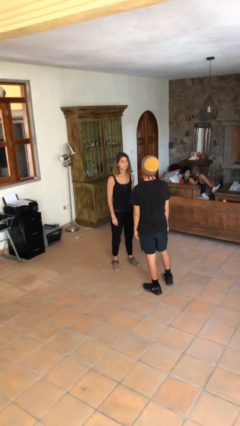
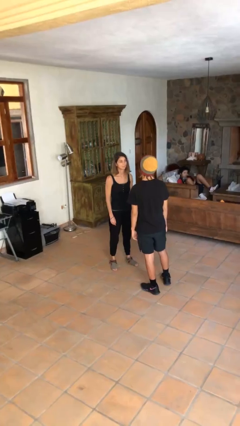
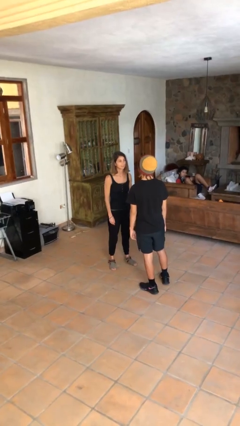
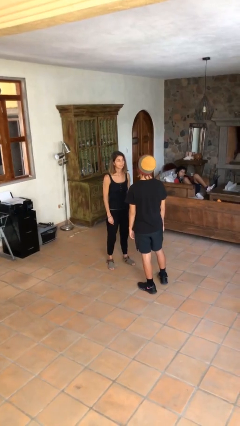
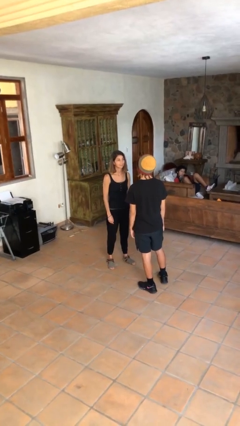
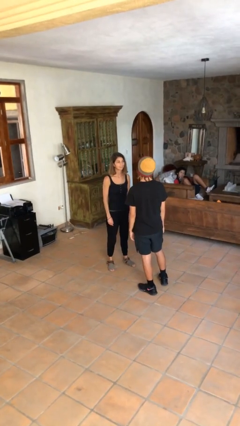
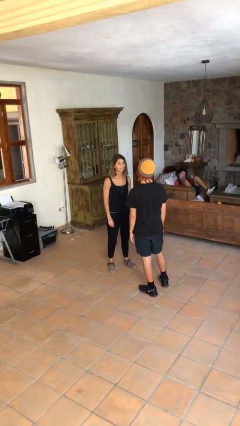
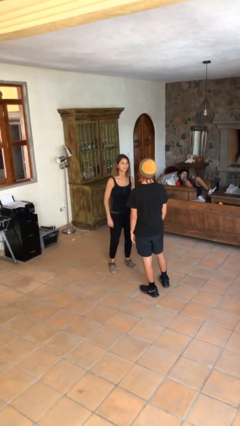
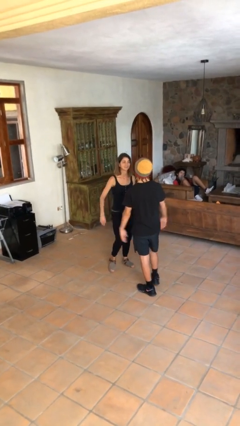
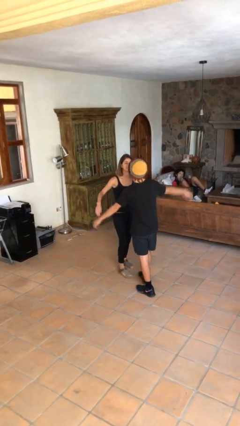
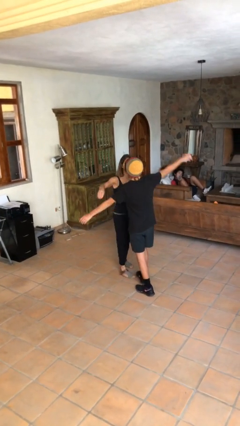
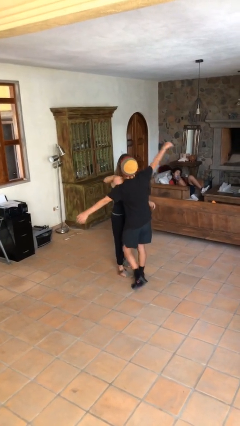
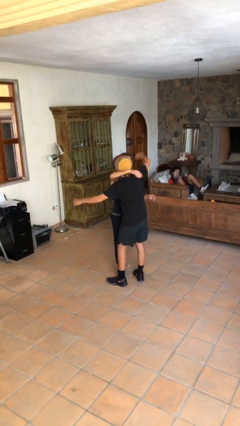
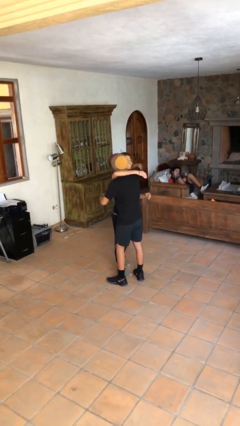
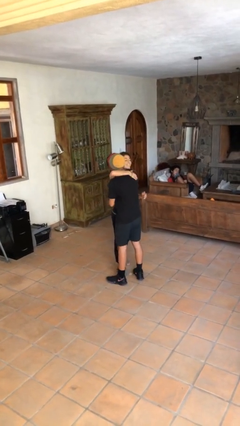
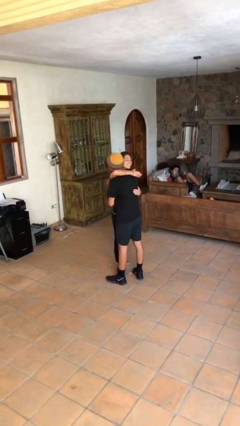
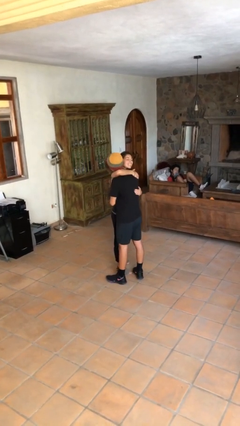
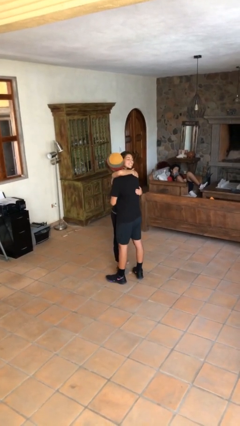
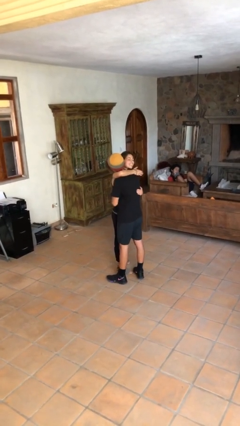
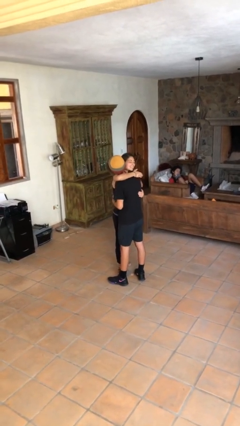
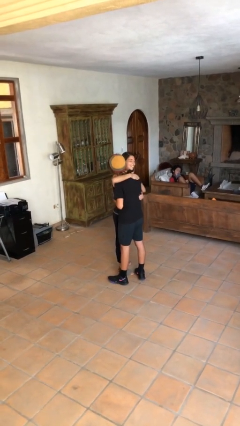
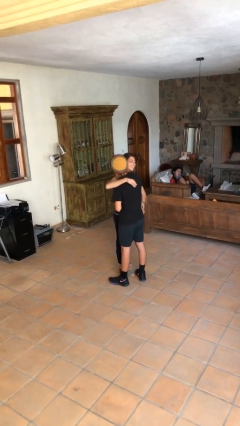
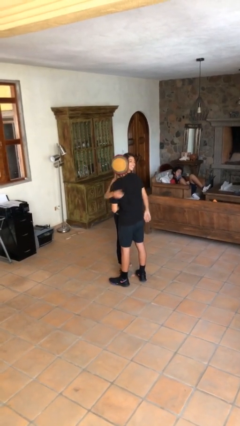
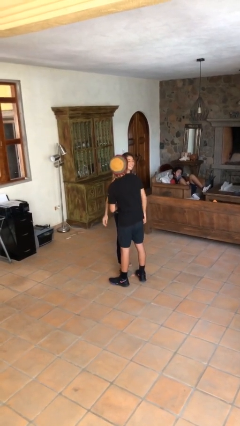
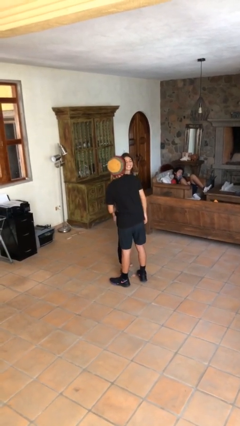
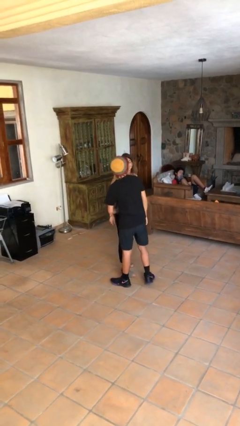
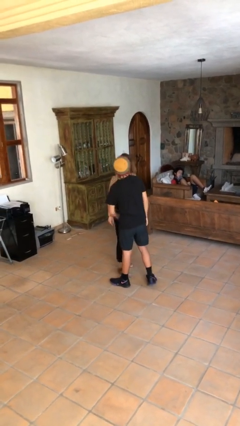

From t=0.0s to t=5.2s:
person embraces person

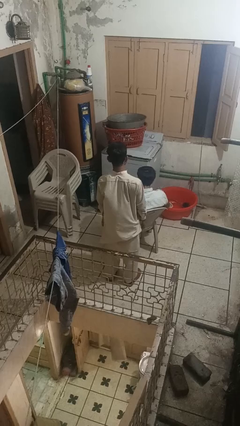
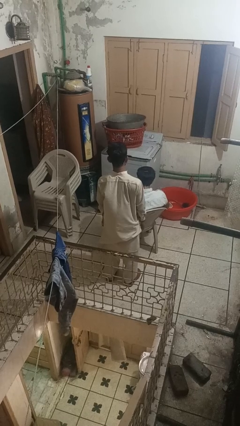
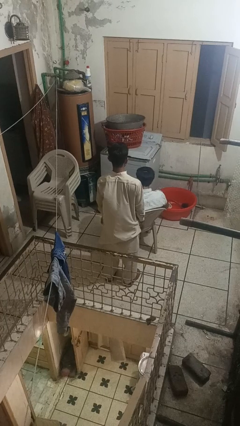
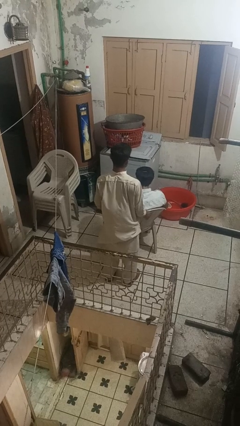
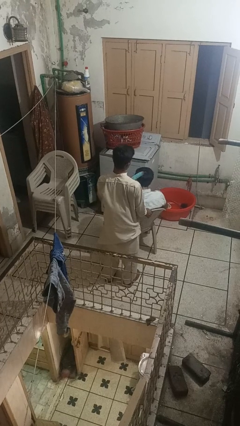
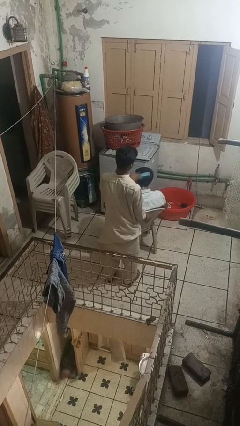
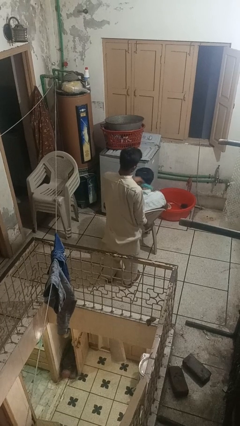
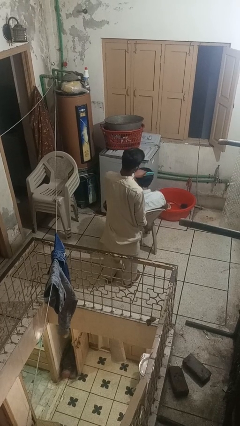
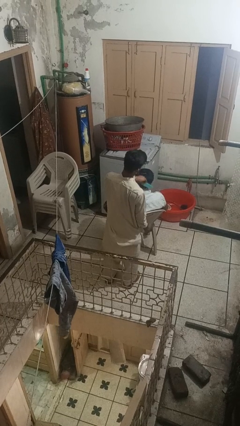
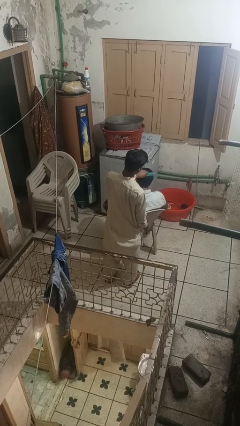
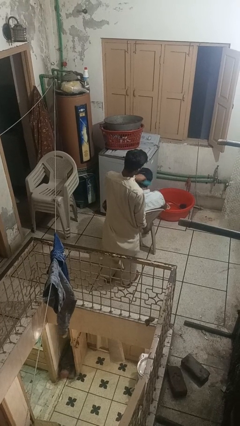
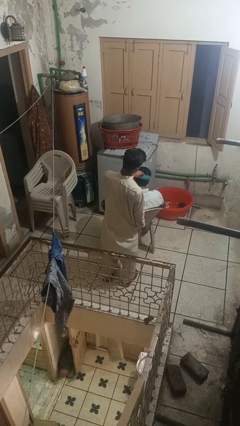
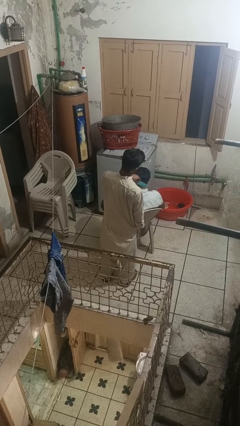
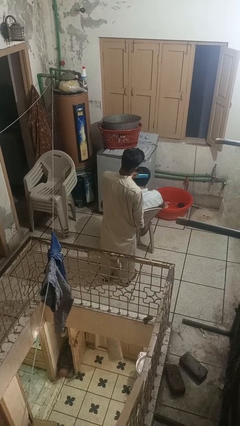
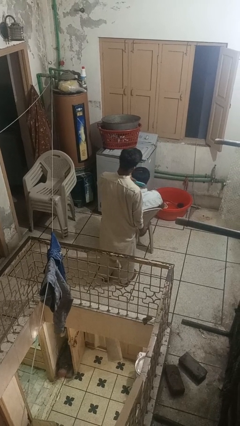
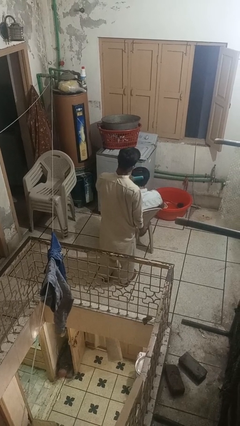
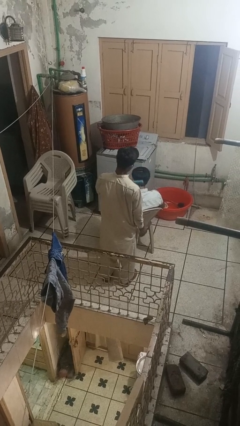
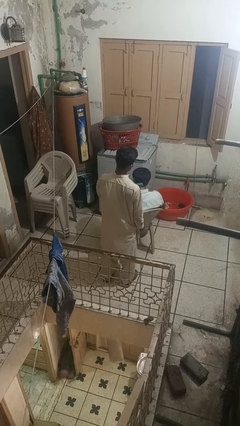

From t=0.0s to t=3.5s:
person brushes hair of person

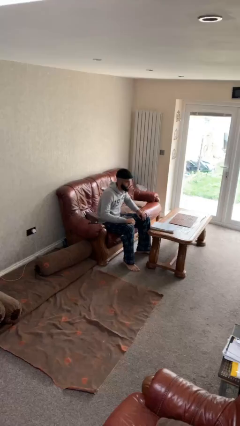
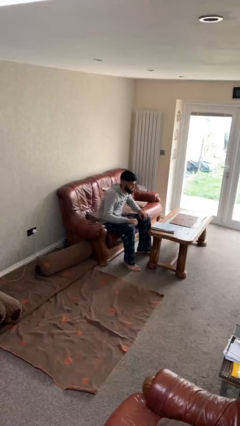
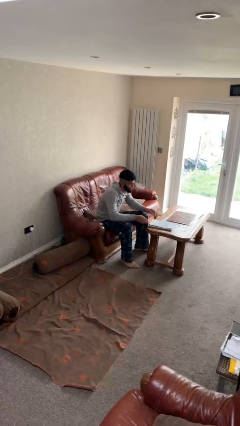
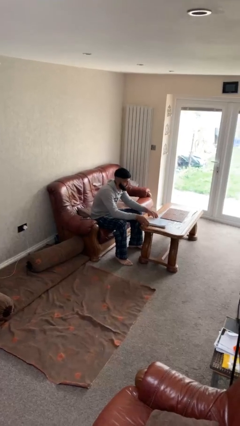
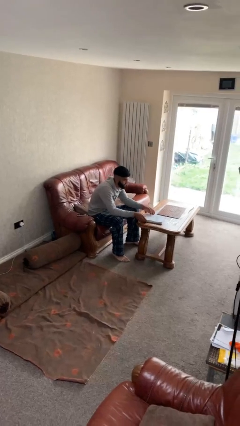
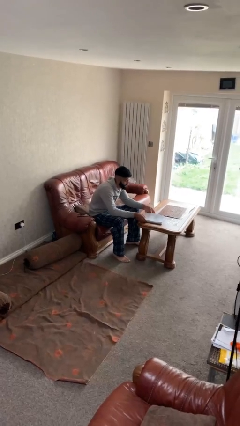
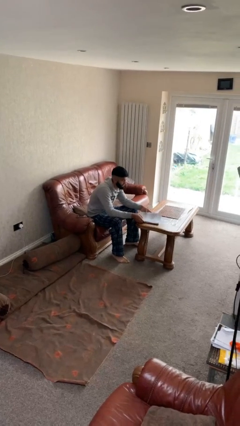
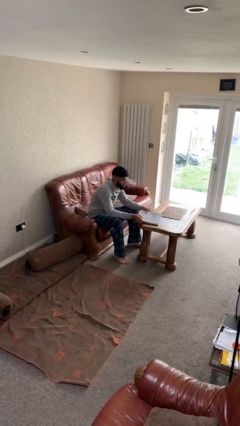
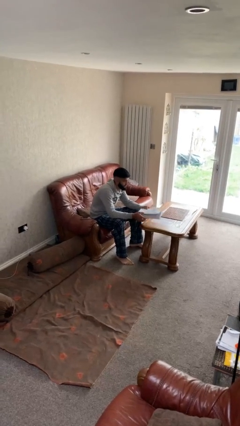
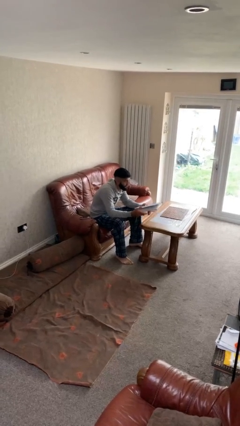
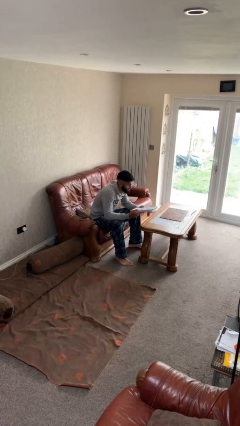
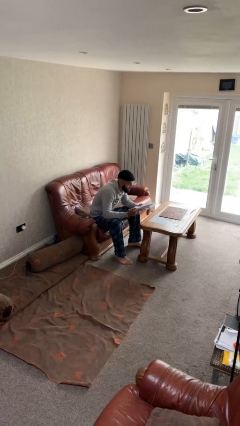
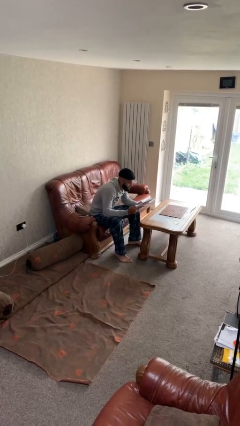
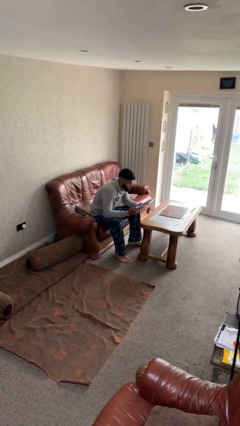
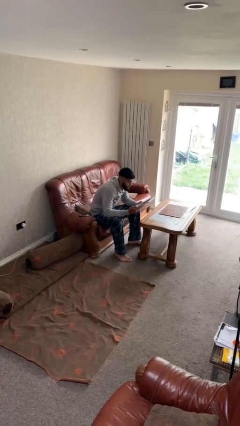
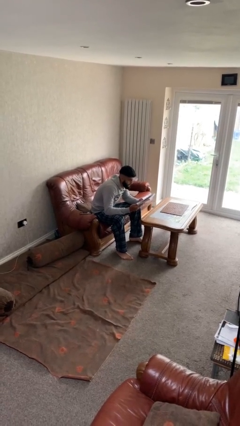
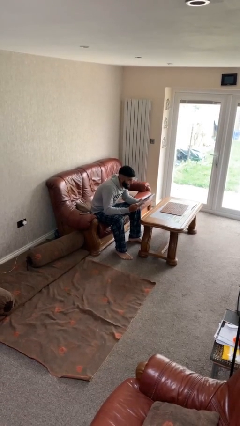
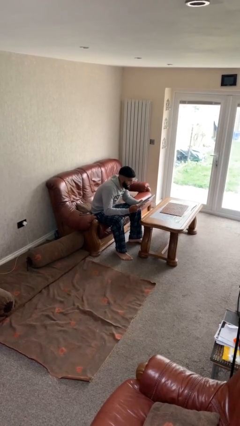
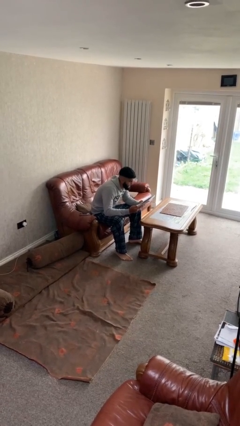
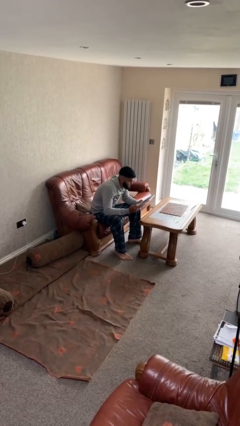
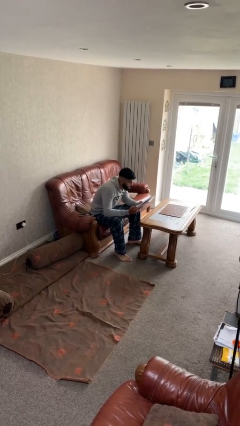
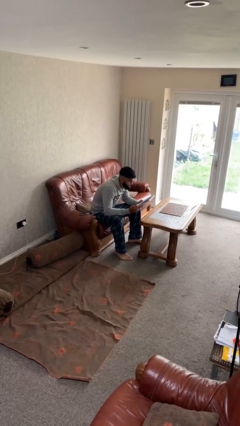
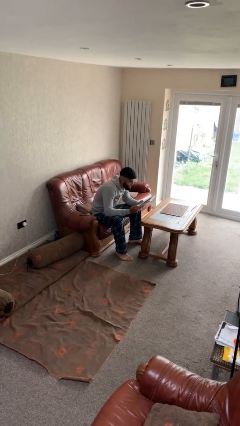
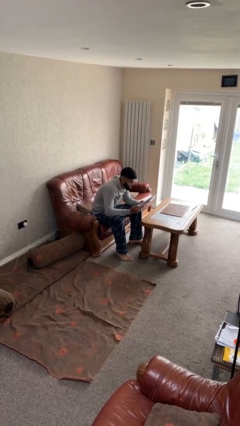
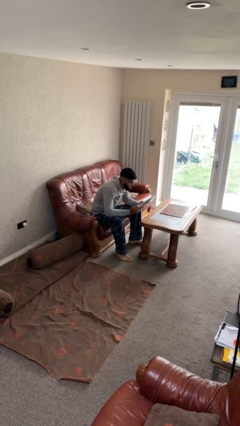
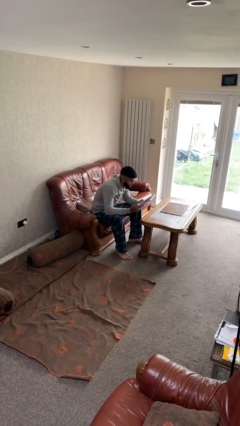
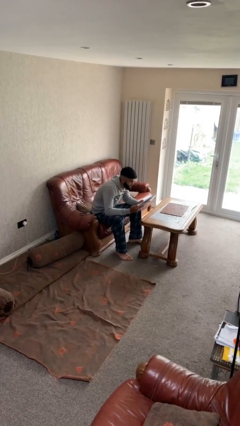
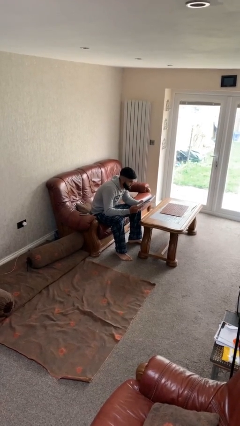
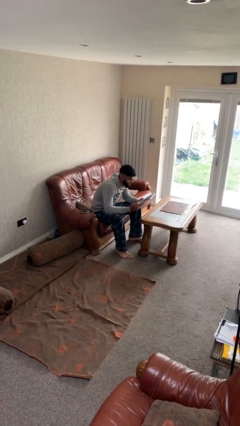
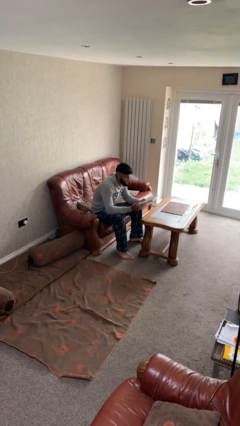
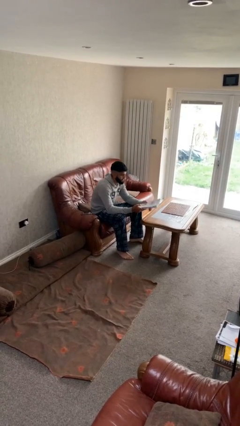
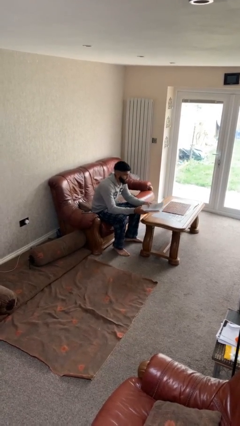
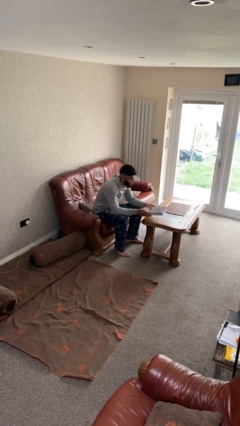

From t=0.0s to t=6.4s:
person reads document

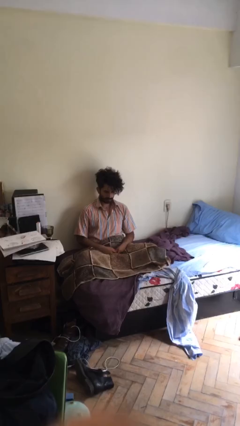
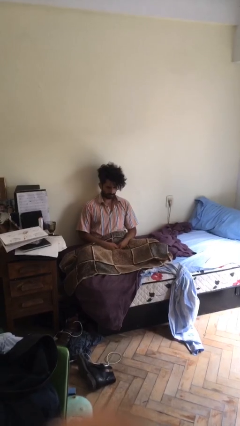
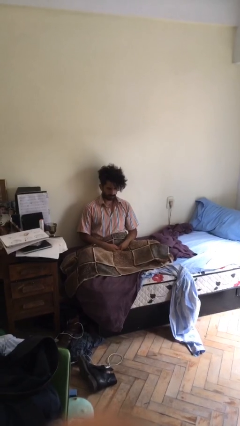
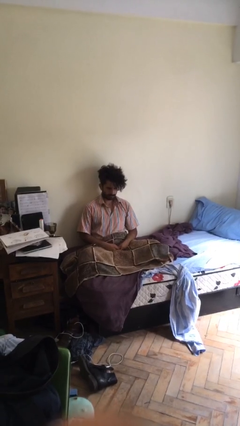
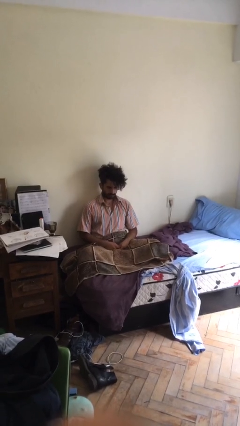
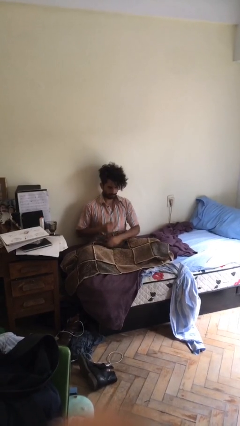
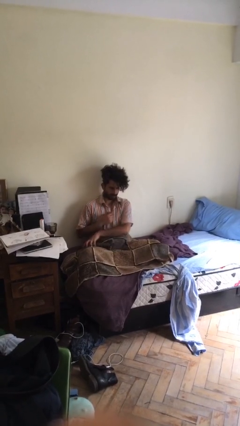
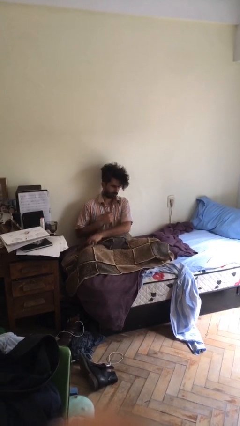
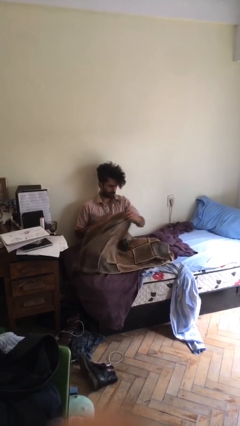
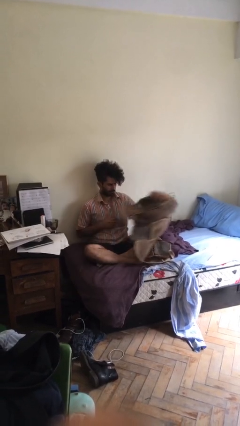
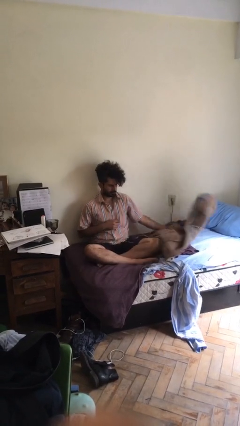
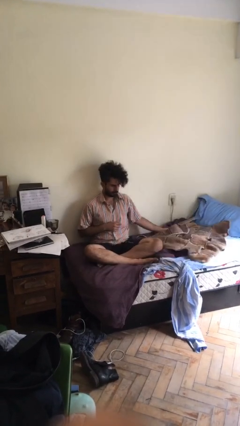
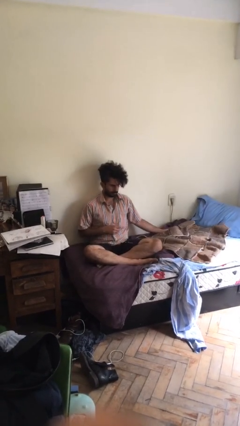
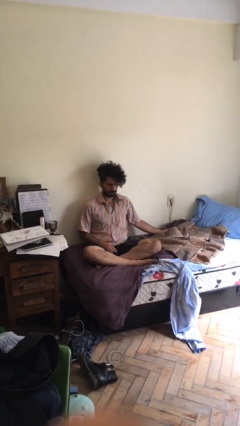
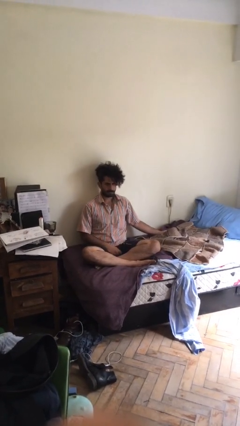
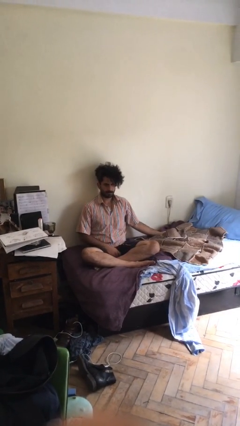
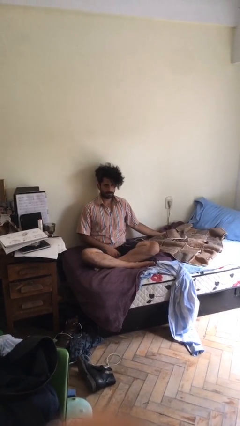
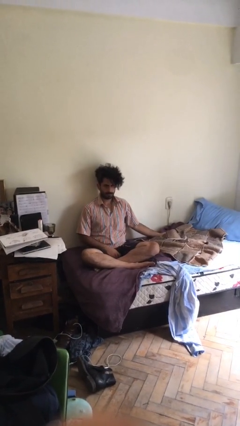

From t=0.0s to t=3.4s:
person uncovers with blanket
